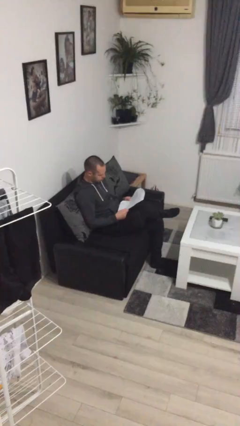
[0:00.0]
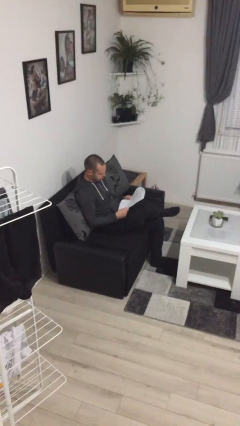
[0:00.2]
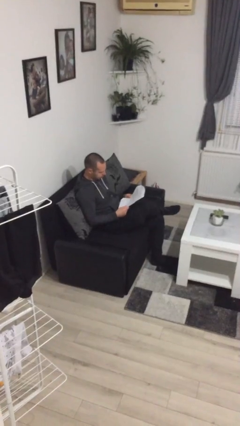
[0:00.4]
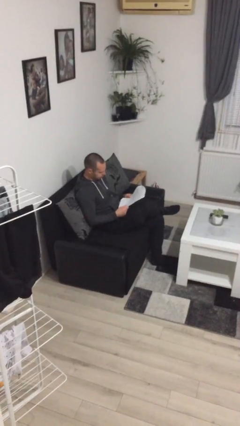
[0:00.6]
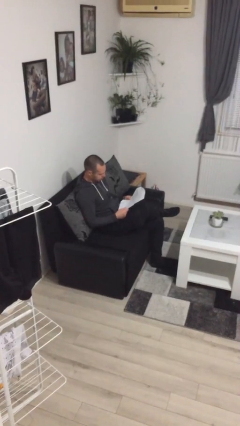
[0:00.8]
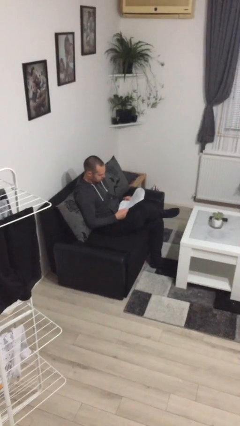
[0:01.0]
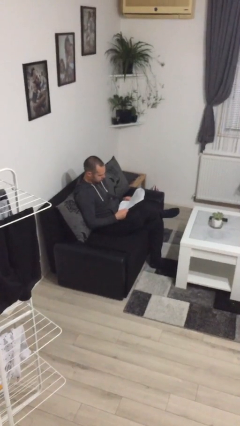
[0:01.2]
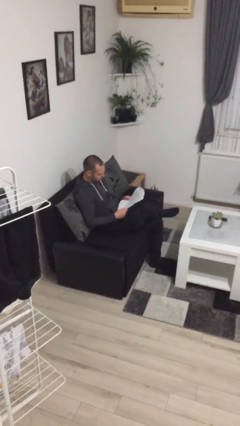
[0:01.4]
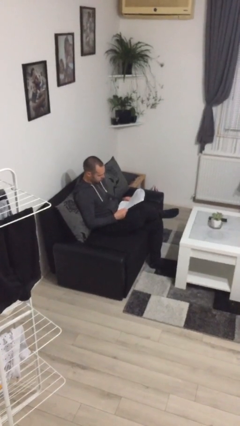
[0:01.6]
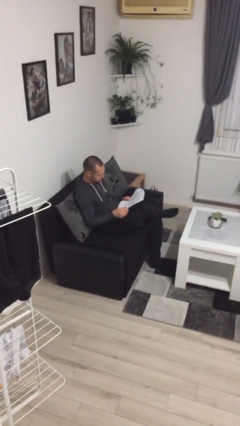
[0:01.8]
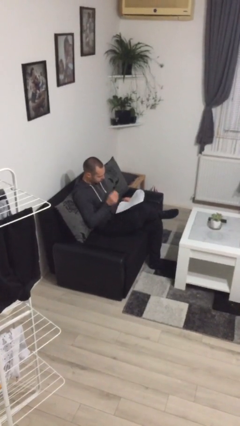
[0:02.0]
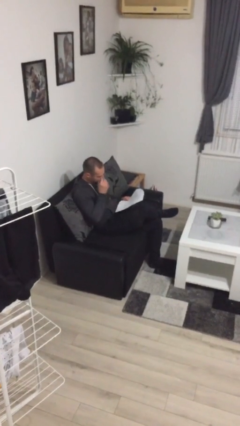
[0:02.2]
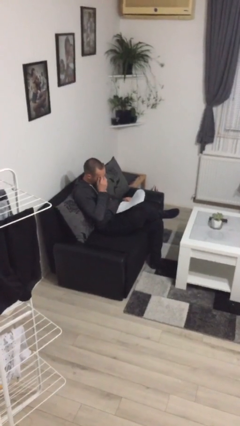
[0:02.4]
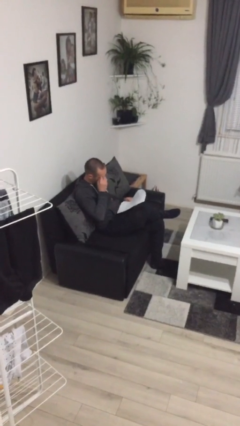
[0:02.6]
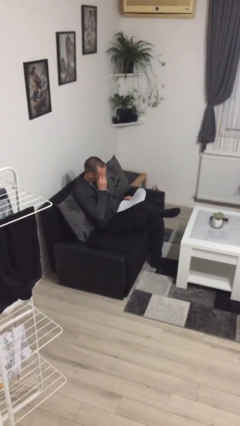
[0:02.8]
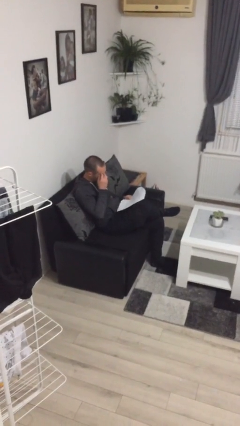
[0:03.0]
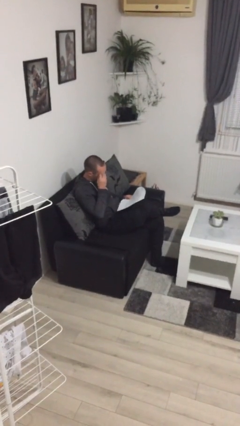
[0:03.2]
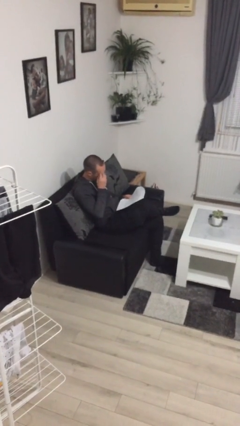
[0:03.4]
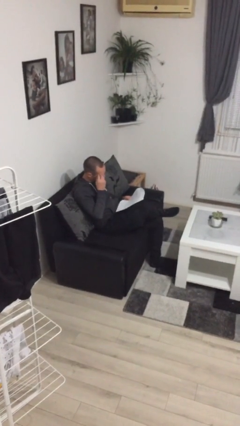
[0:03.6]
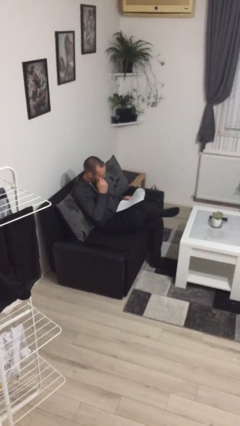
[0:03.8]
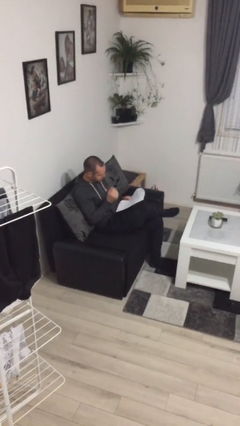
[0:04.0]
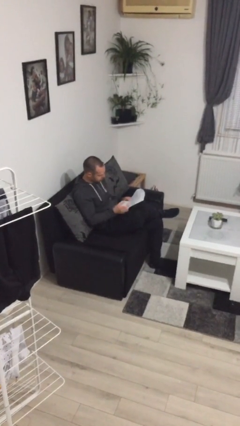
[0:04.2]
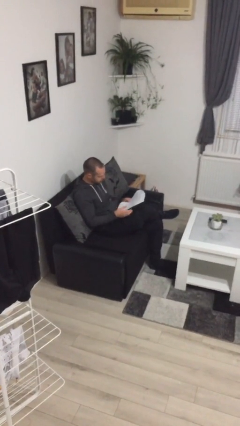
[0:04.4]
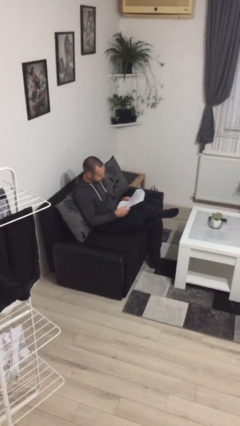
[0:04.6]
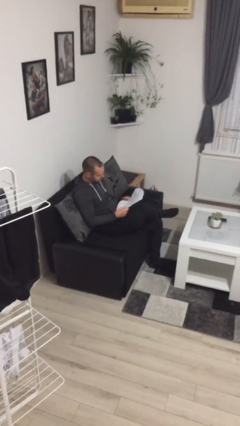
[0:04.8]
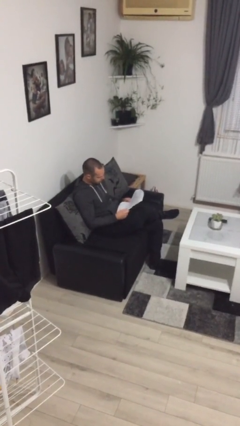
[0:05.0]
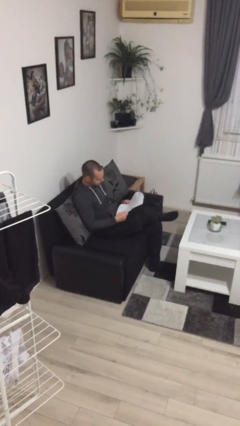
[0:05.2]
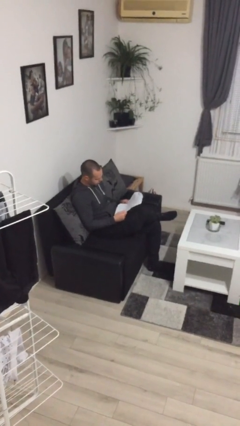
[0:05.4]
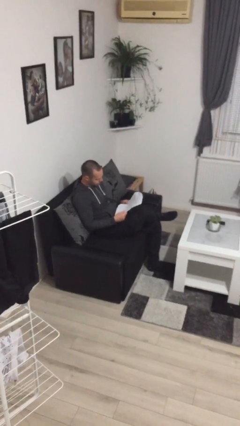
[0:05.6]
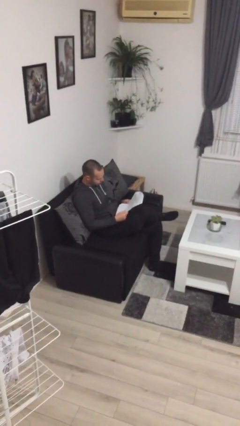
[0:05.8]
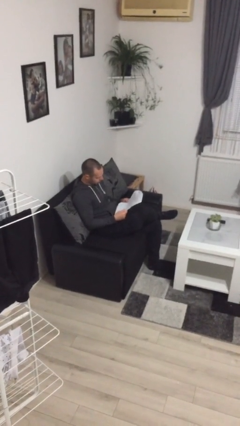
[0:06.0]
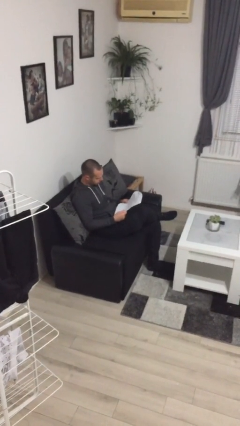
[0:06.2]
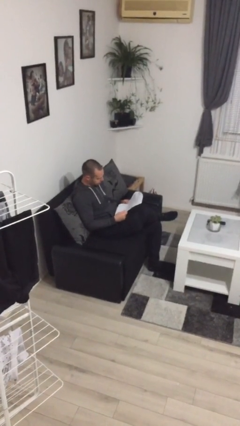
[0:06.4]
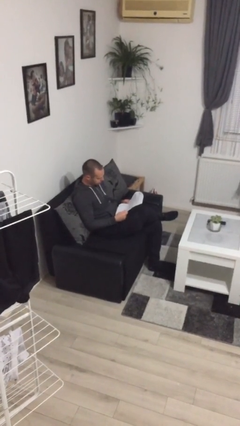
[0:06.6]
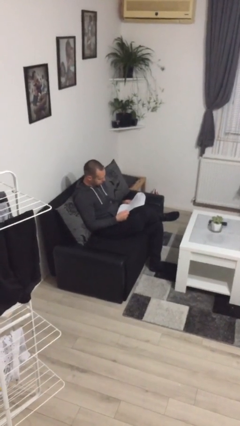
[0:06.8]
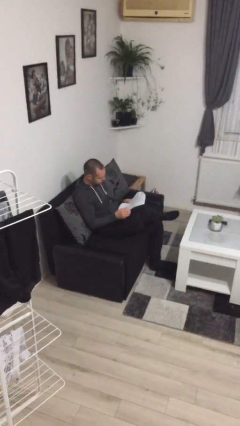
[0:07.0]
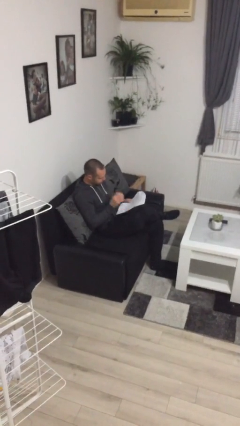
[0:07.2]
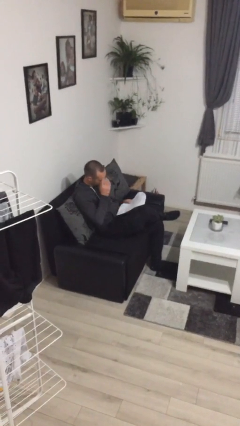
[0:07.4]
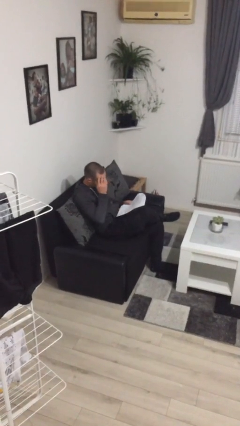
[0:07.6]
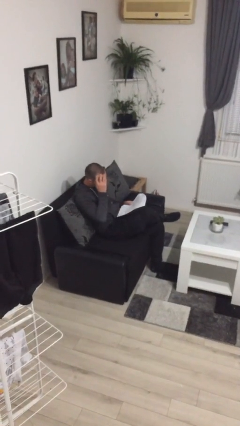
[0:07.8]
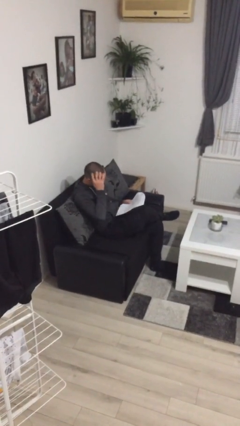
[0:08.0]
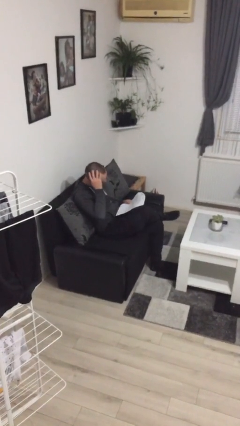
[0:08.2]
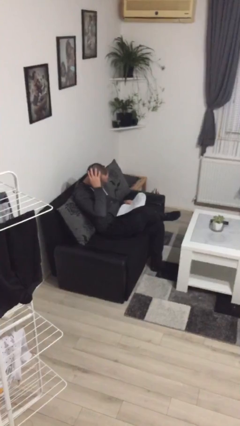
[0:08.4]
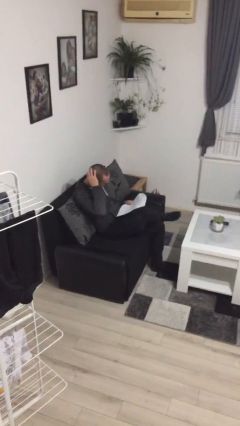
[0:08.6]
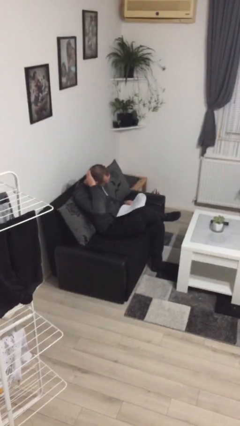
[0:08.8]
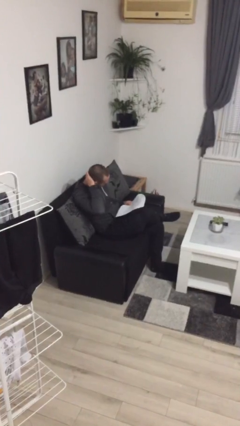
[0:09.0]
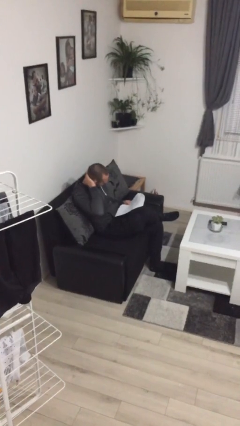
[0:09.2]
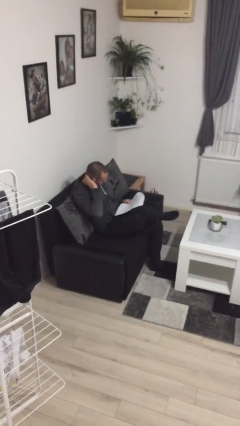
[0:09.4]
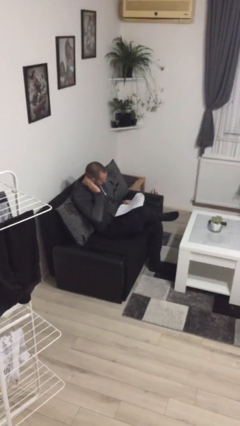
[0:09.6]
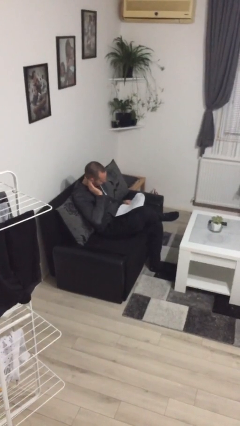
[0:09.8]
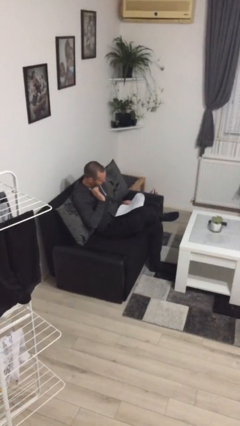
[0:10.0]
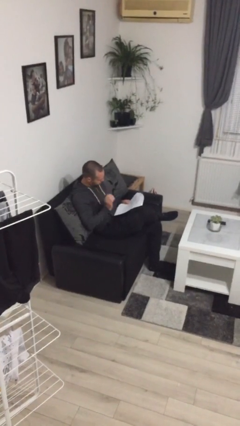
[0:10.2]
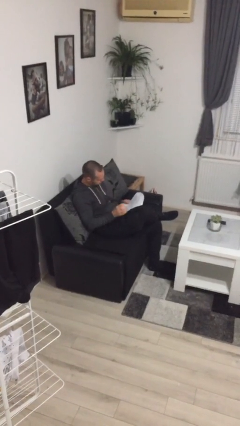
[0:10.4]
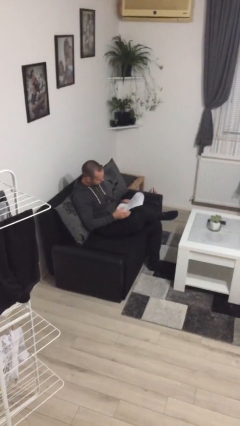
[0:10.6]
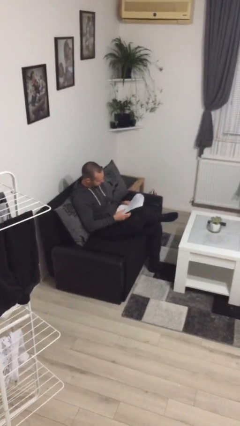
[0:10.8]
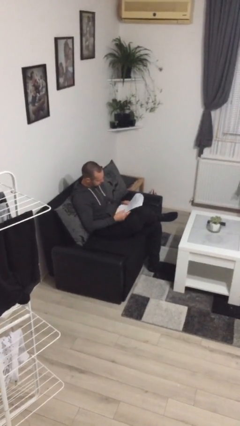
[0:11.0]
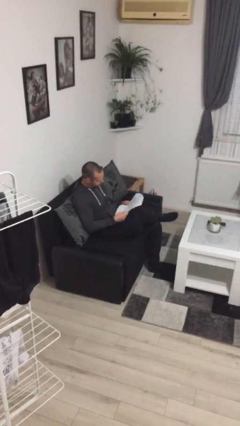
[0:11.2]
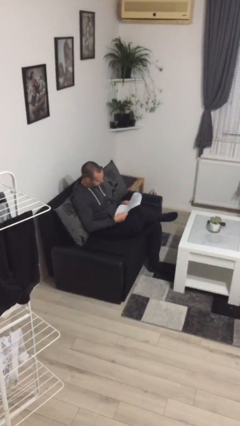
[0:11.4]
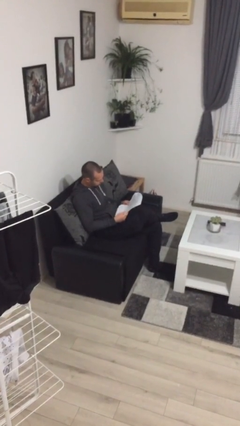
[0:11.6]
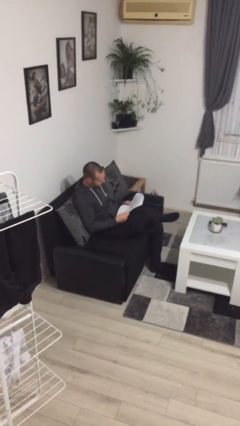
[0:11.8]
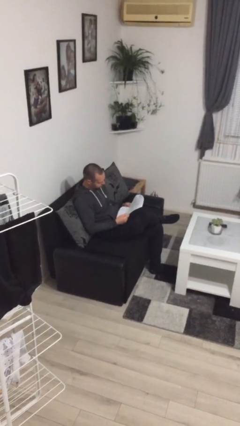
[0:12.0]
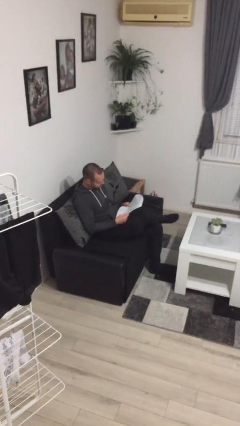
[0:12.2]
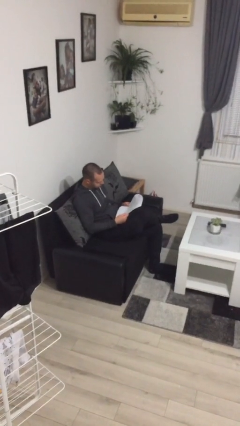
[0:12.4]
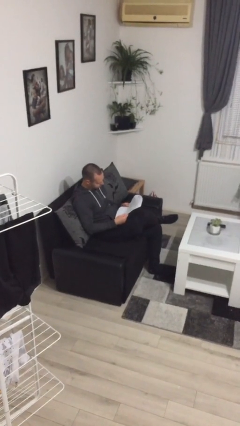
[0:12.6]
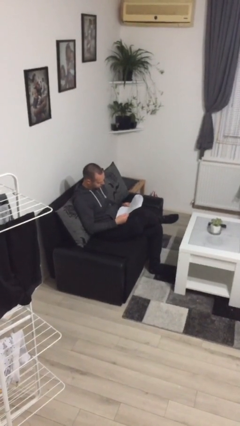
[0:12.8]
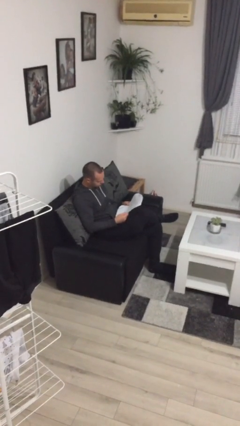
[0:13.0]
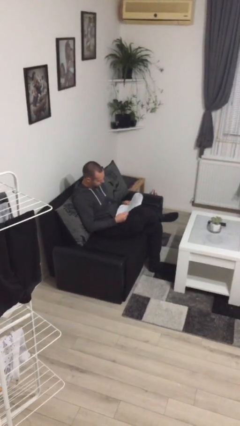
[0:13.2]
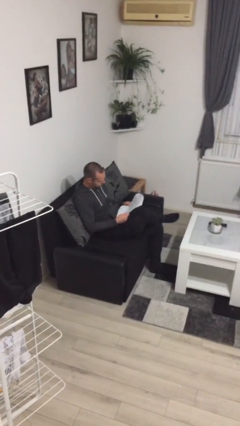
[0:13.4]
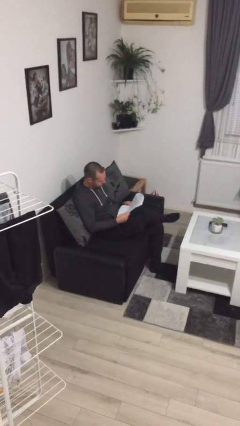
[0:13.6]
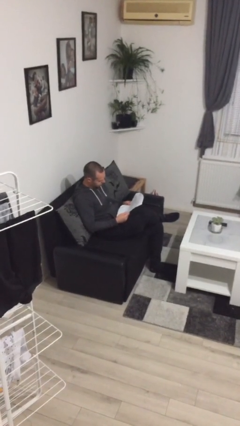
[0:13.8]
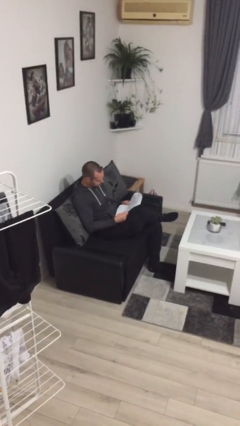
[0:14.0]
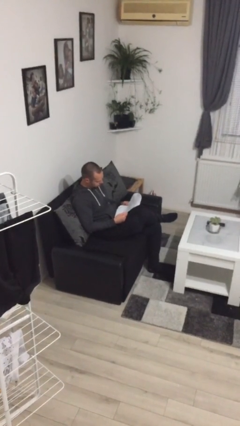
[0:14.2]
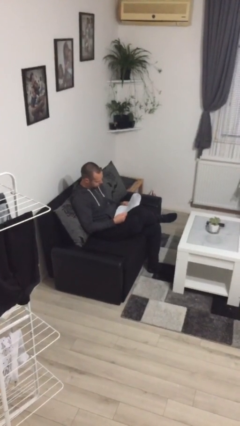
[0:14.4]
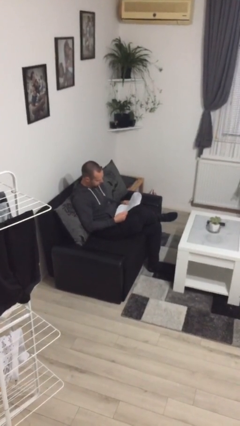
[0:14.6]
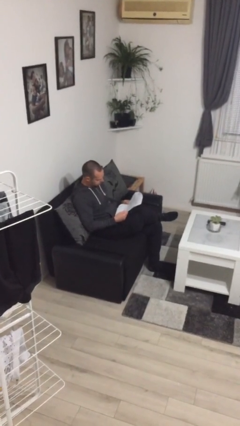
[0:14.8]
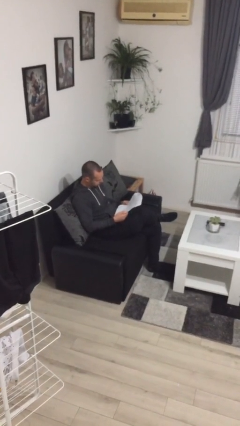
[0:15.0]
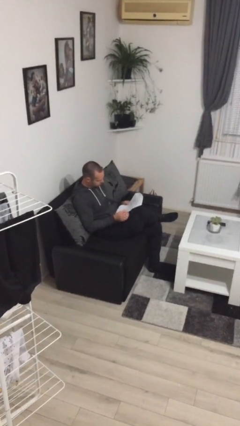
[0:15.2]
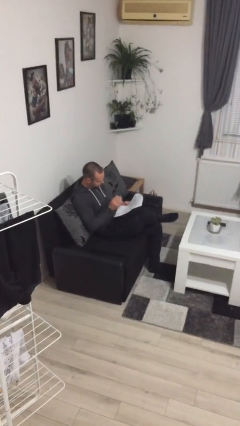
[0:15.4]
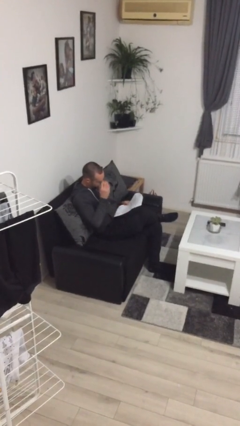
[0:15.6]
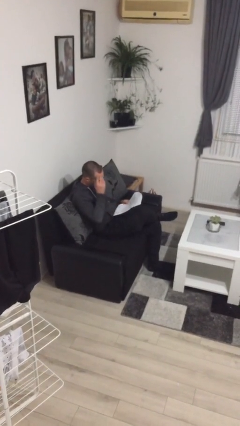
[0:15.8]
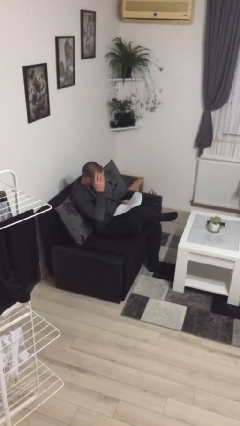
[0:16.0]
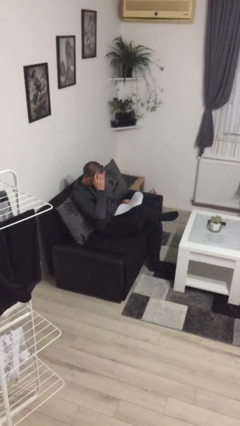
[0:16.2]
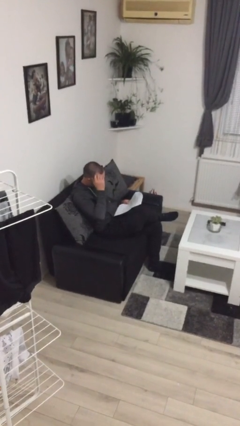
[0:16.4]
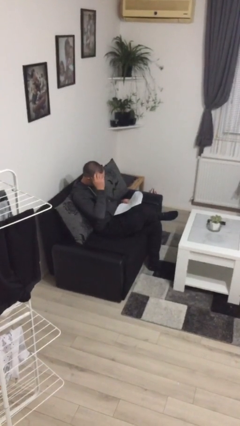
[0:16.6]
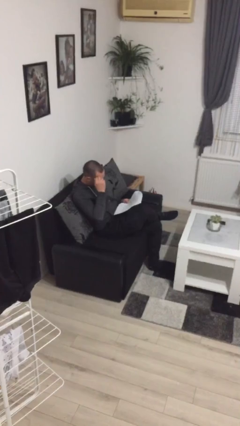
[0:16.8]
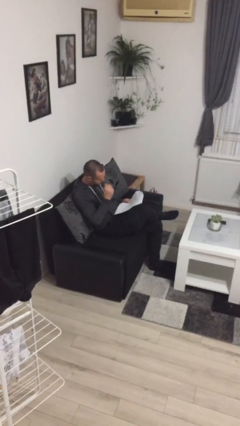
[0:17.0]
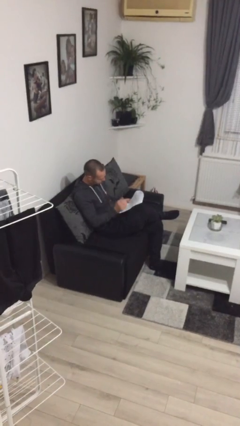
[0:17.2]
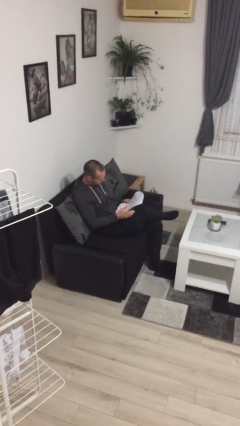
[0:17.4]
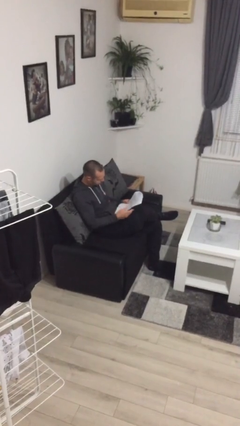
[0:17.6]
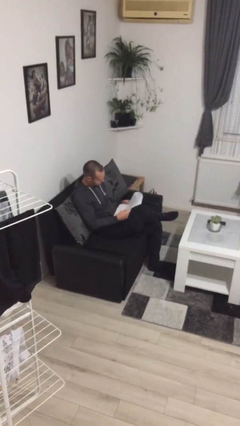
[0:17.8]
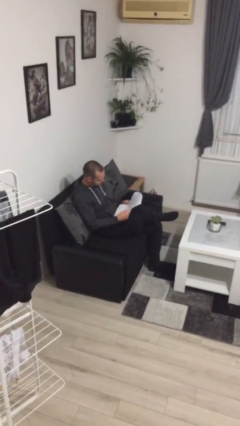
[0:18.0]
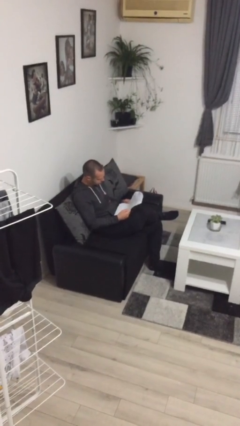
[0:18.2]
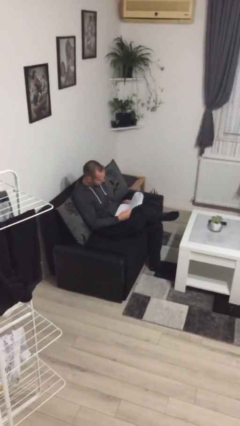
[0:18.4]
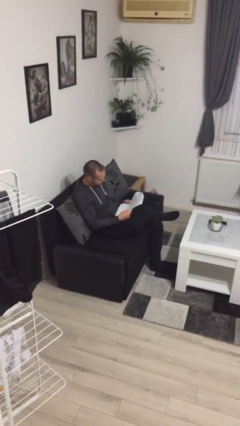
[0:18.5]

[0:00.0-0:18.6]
person reads document
